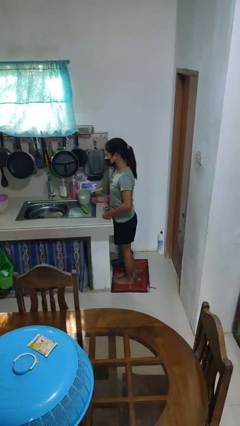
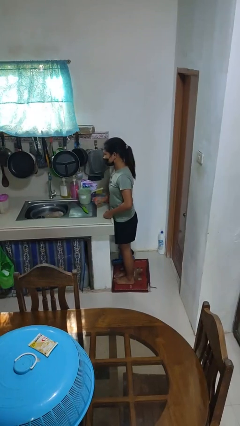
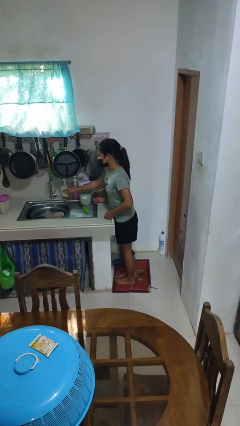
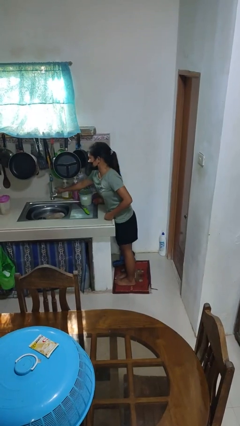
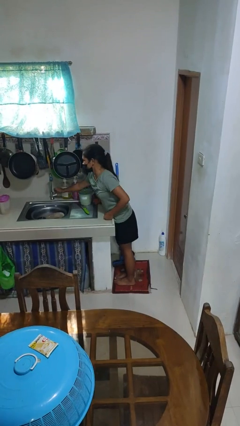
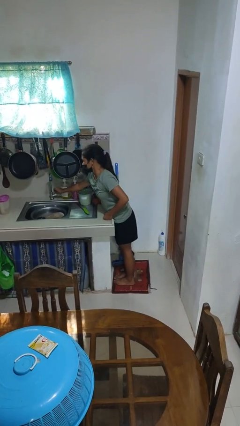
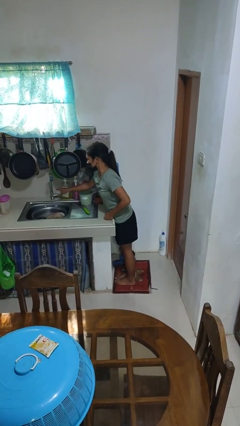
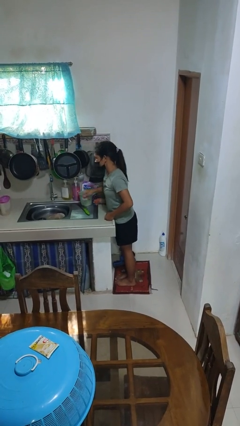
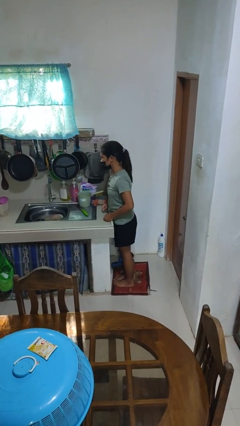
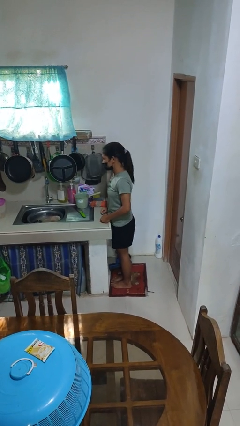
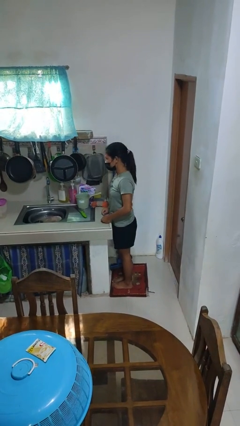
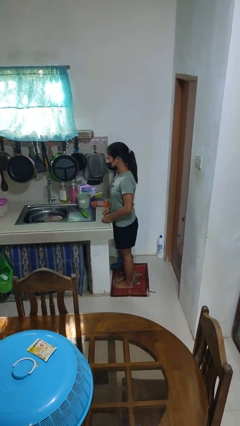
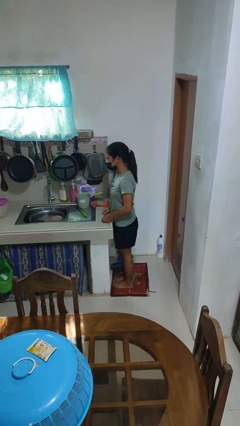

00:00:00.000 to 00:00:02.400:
person turns on faucet

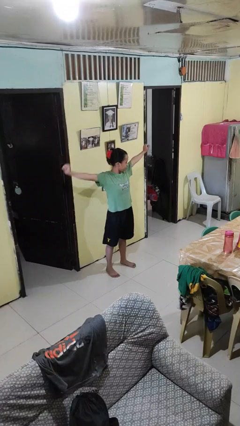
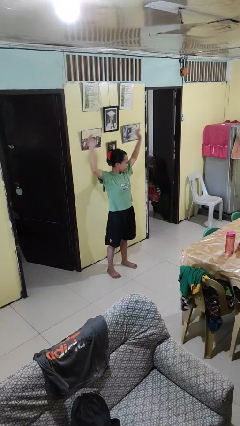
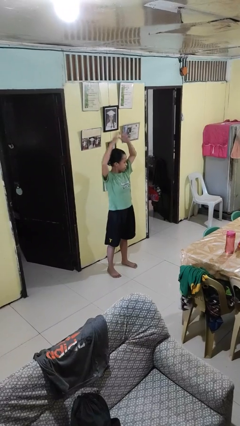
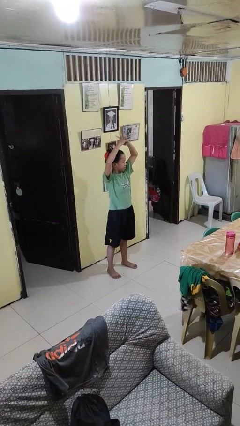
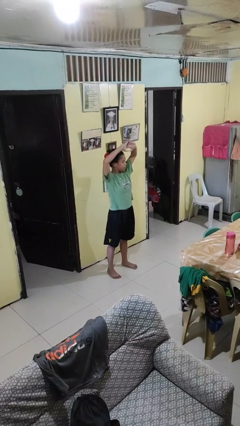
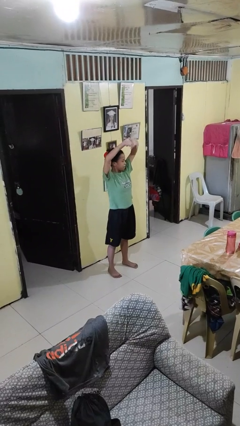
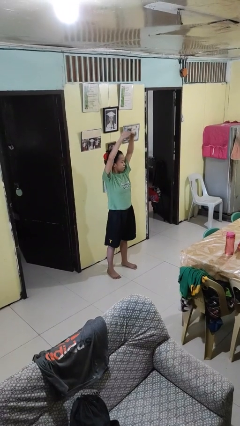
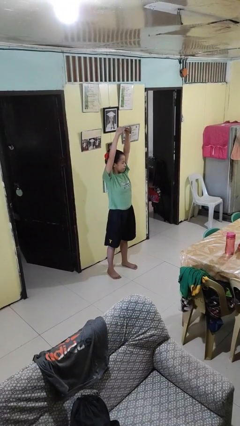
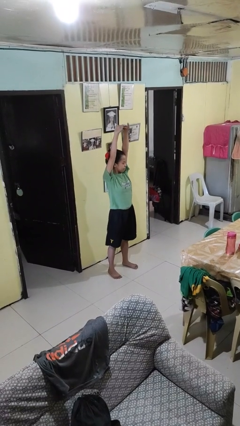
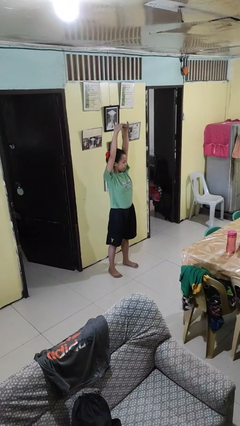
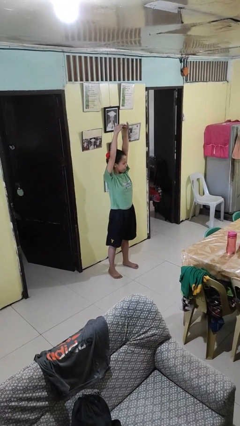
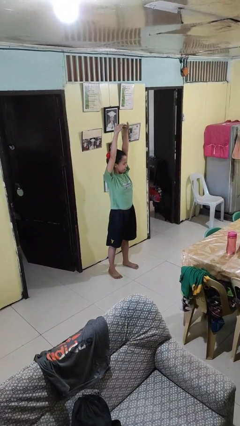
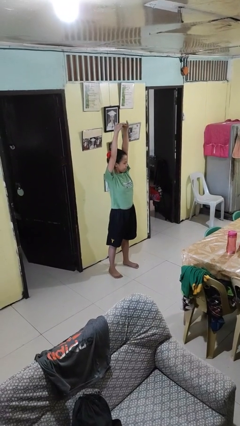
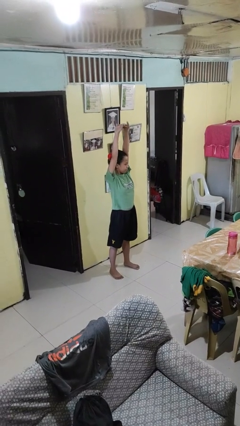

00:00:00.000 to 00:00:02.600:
person stretches arms over head

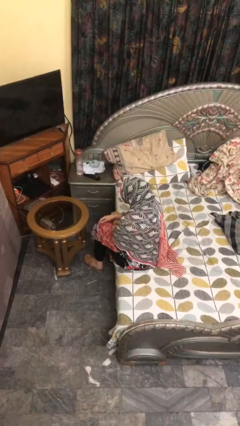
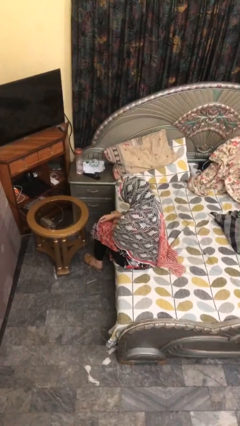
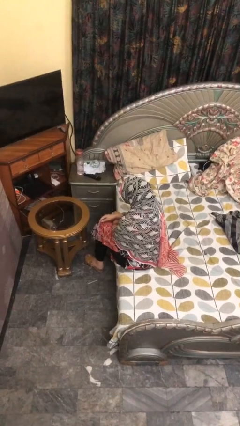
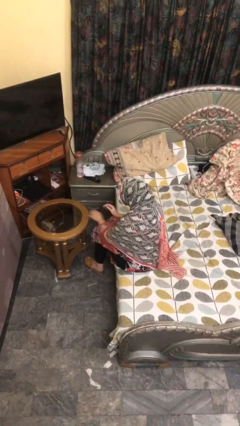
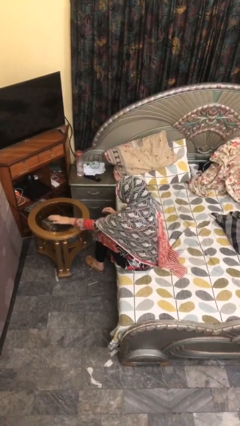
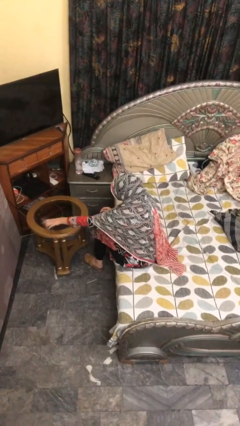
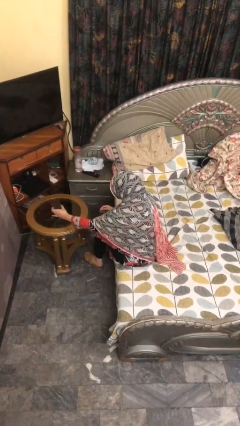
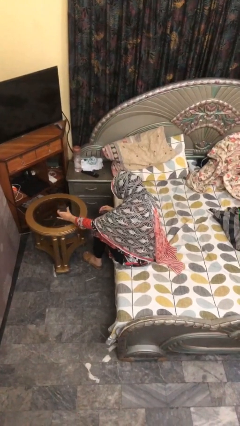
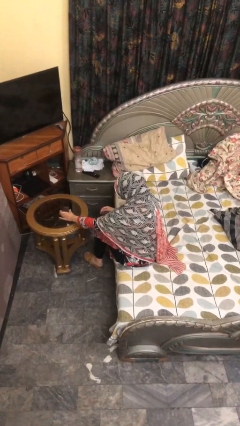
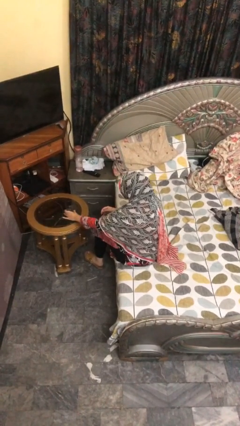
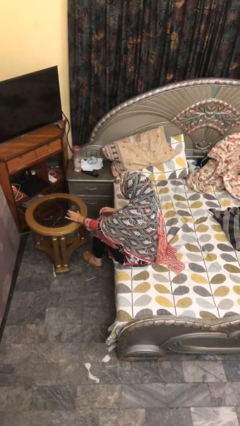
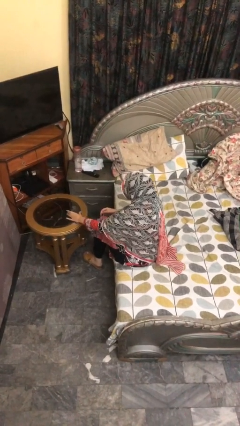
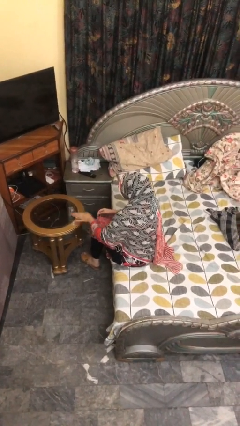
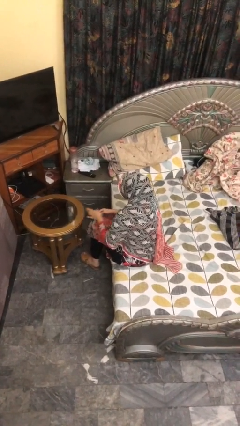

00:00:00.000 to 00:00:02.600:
person sets upright glass

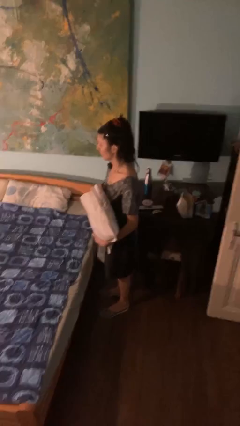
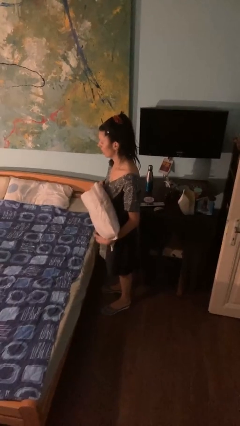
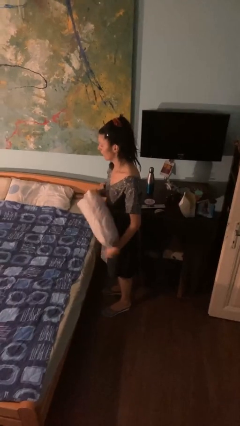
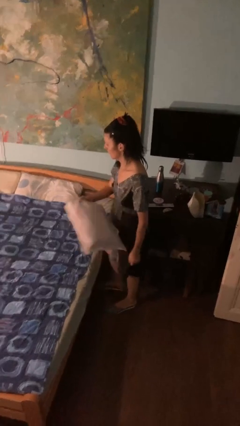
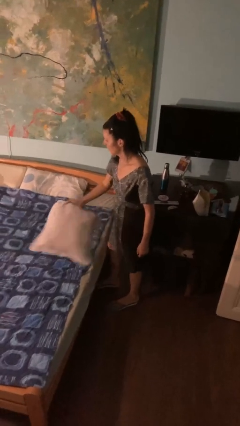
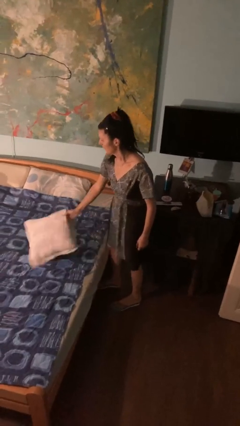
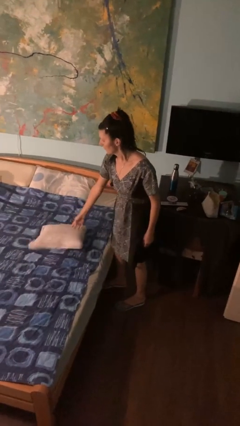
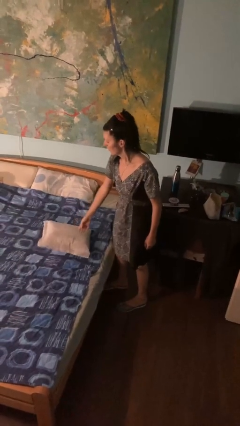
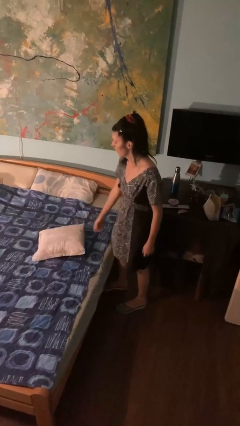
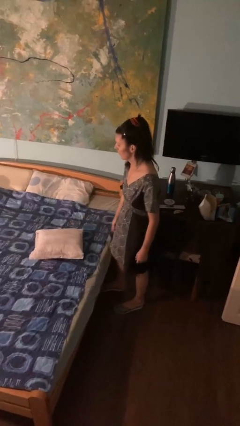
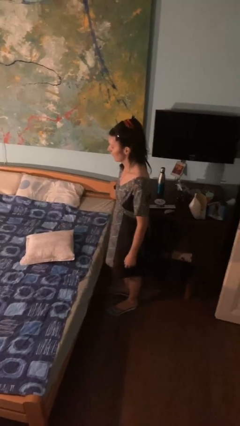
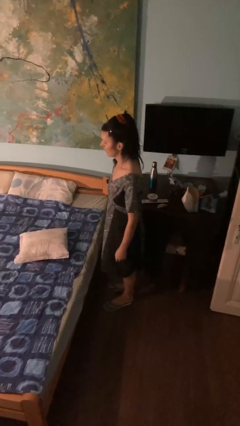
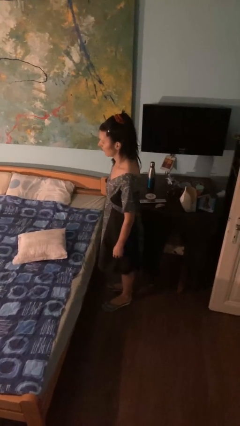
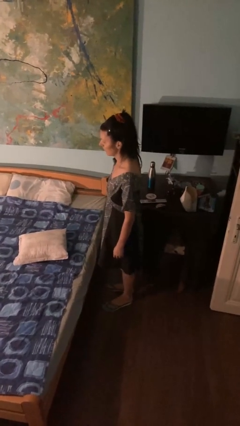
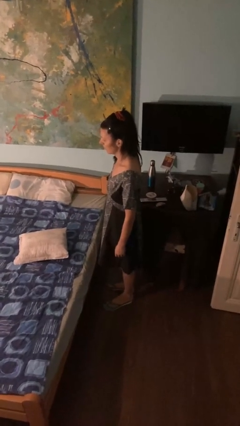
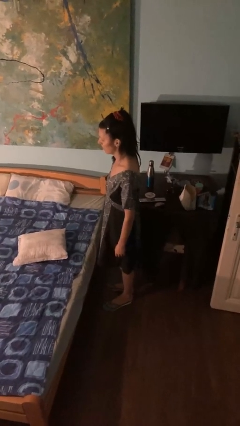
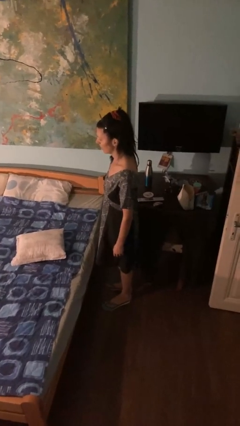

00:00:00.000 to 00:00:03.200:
person puts down object on bed

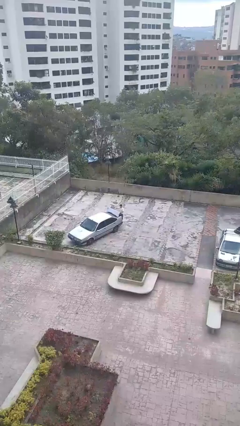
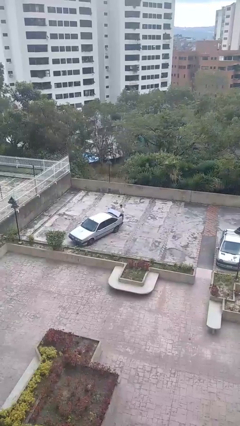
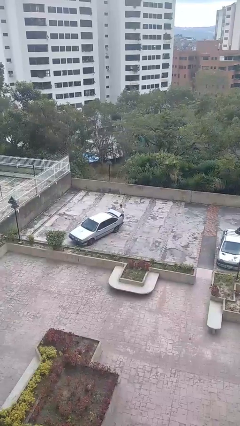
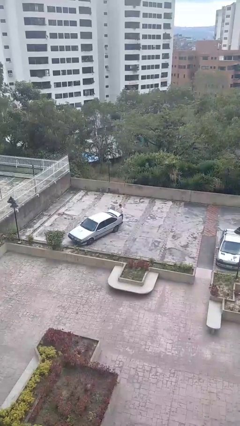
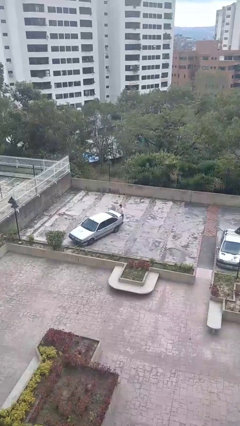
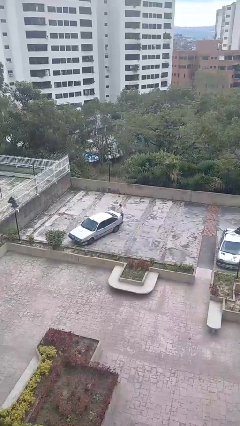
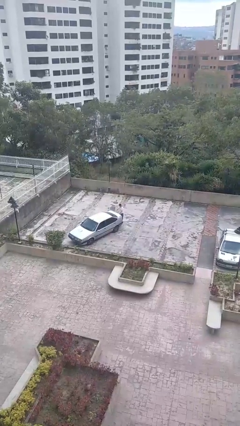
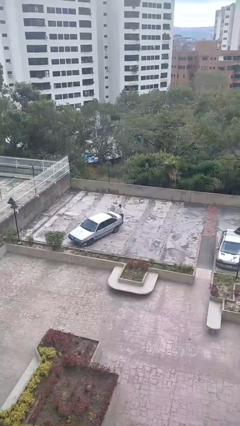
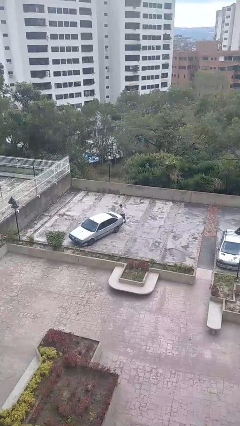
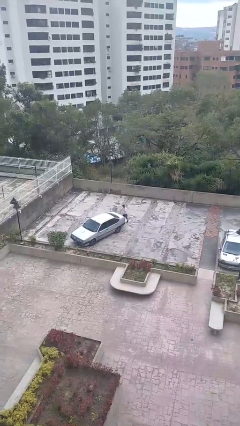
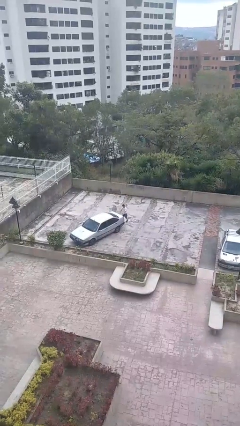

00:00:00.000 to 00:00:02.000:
person closes car trunk

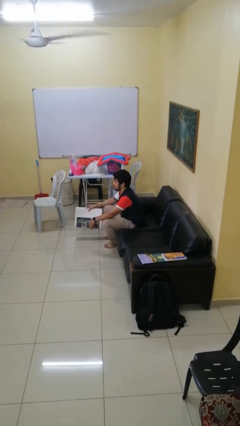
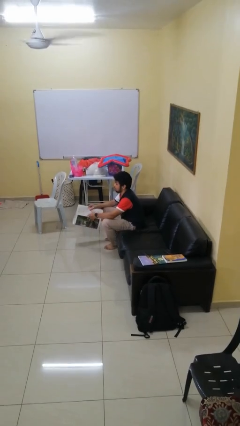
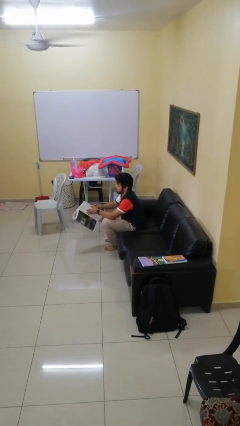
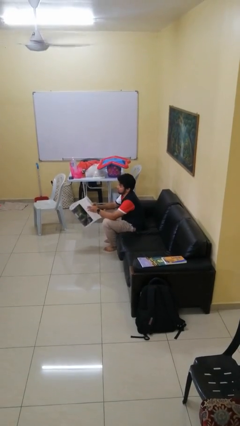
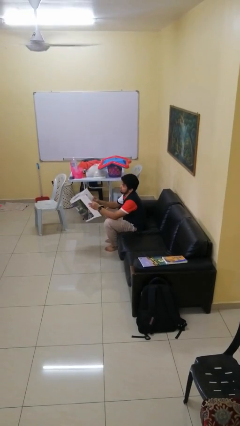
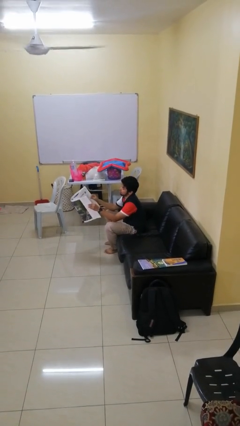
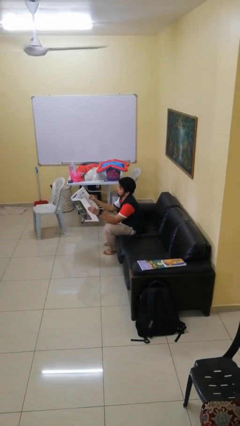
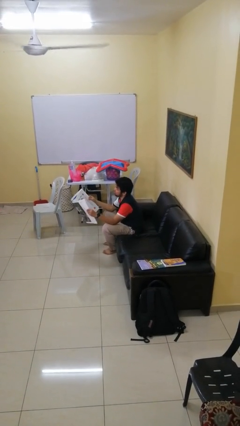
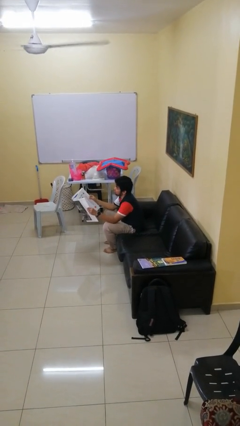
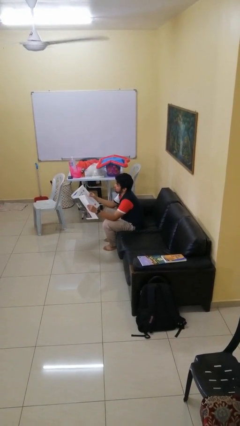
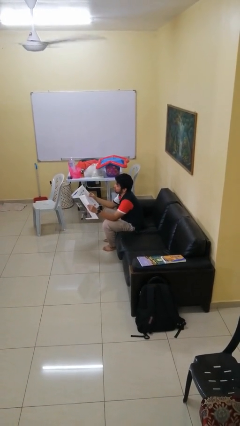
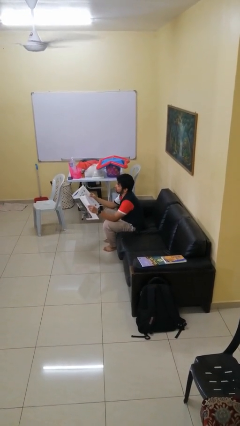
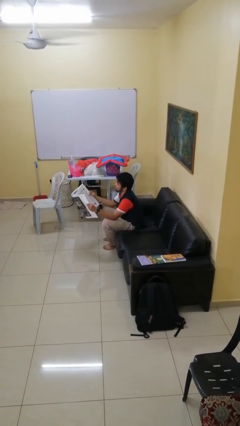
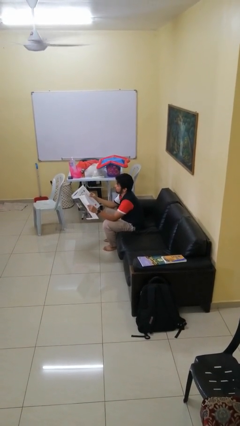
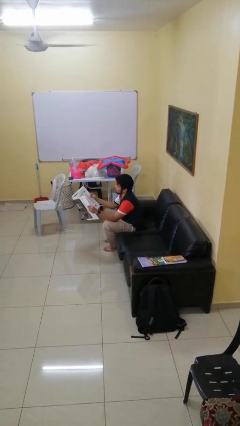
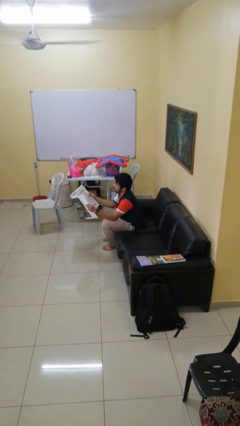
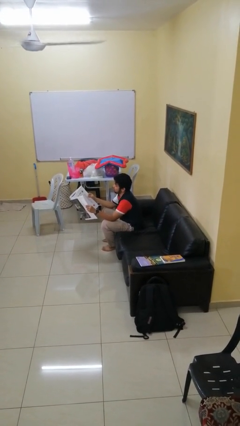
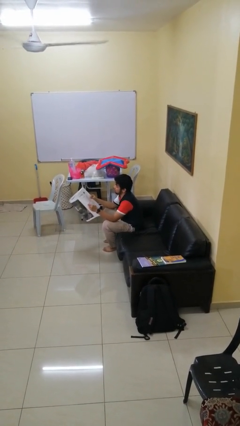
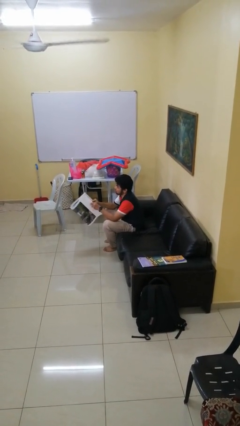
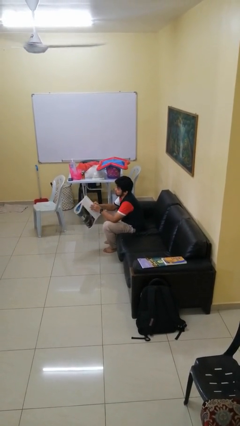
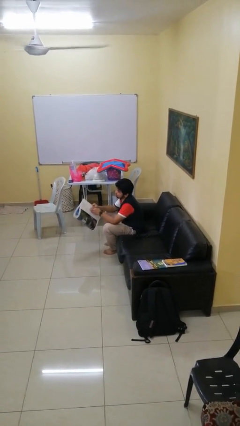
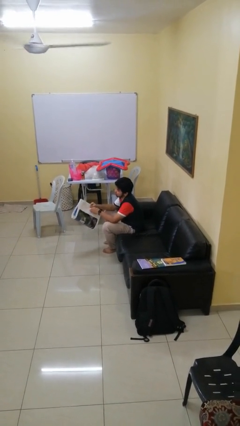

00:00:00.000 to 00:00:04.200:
person reads newspaper
